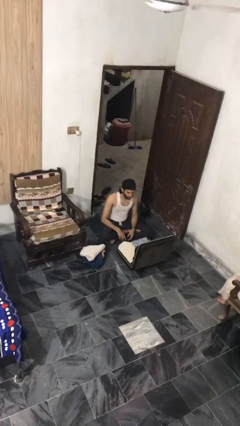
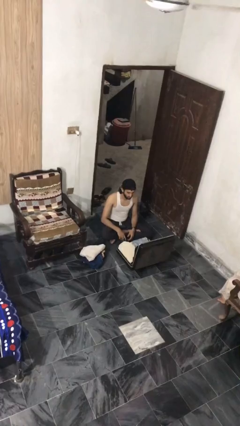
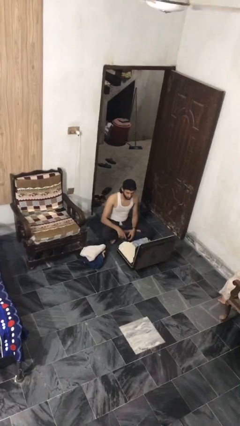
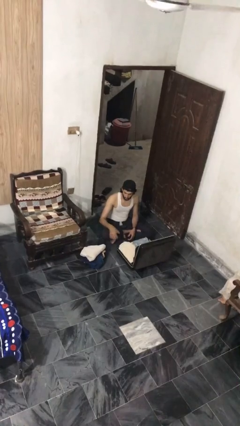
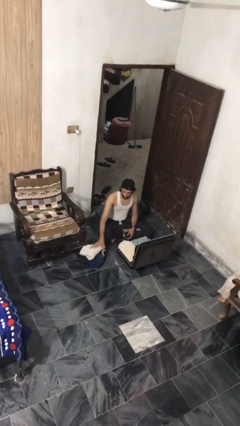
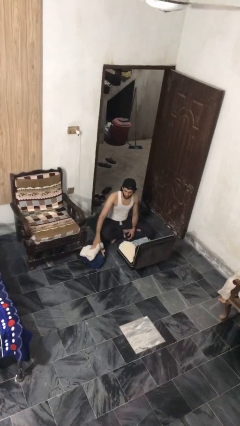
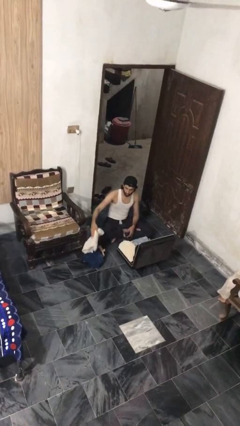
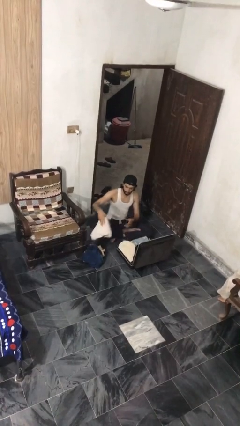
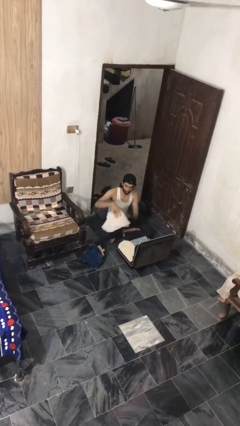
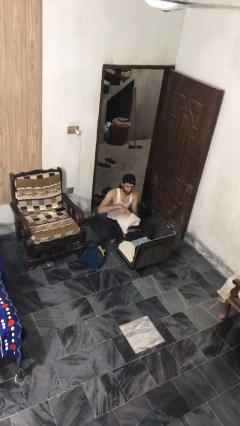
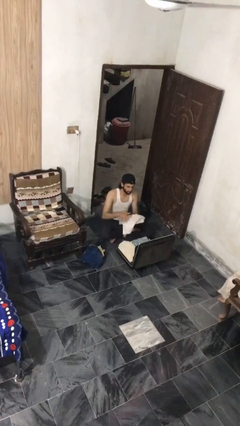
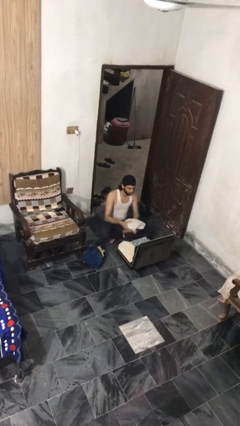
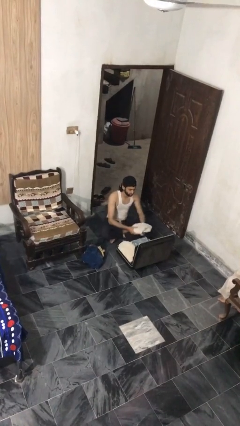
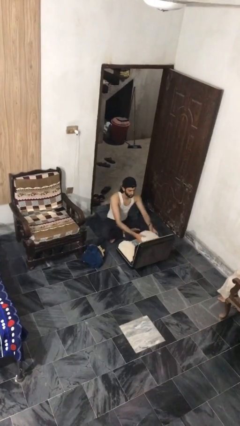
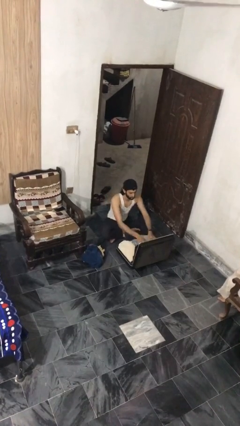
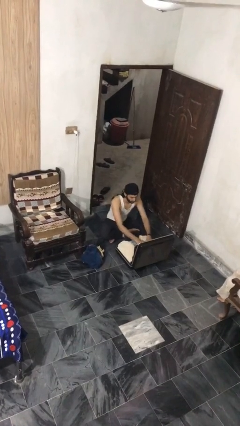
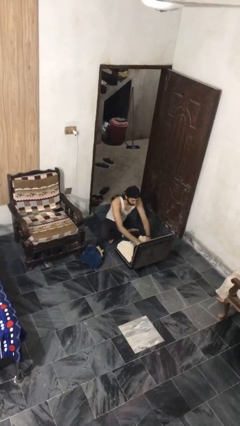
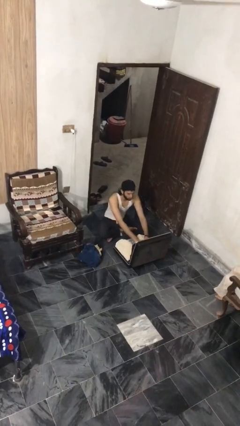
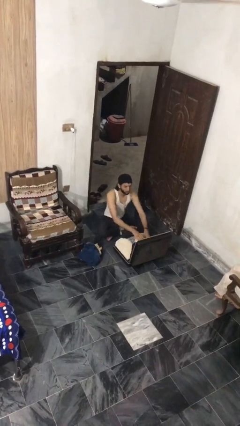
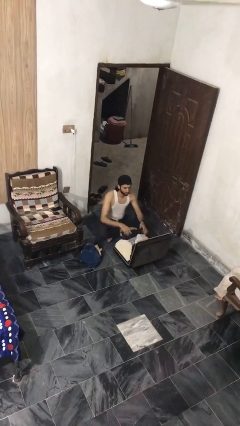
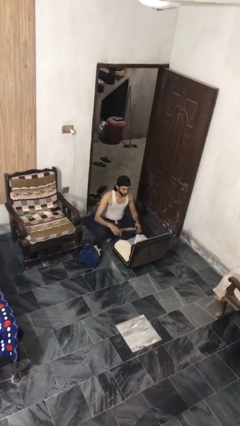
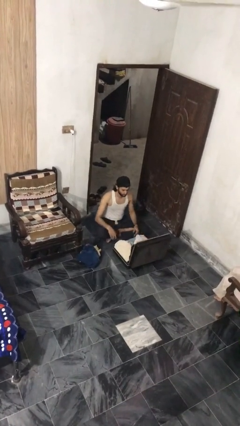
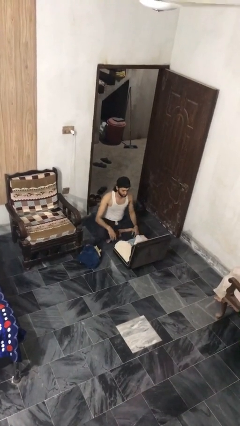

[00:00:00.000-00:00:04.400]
person loads clothes into suitcase

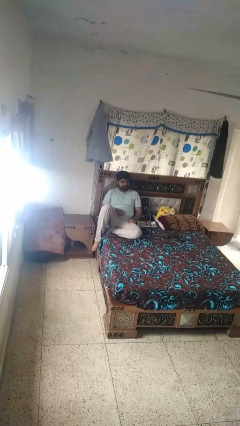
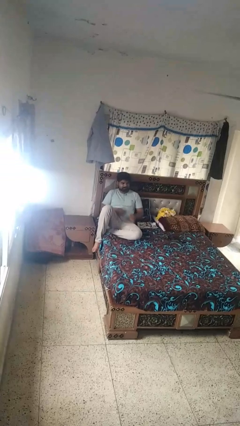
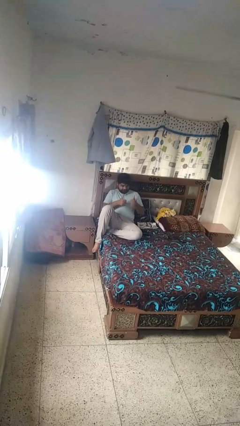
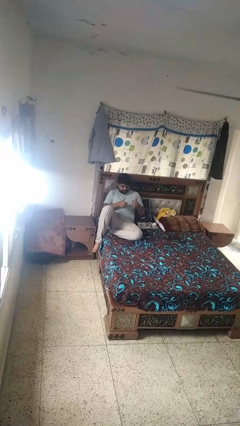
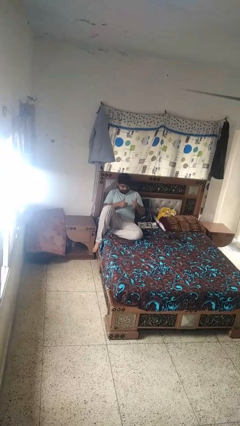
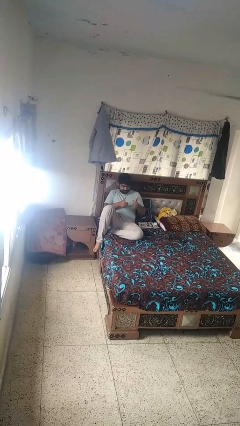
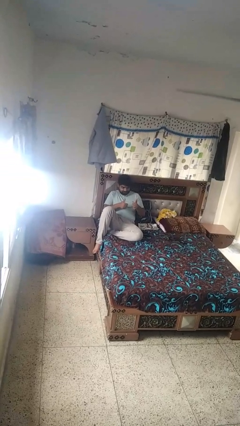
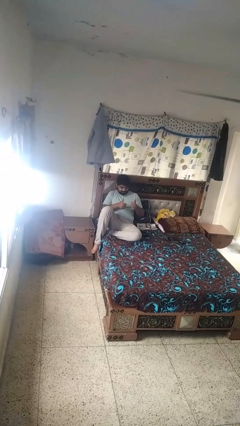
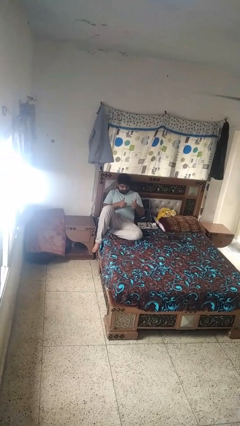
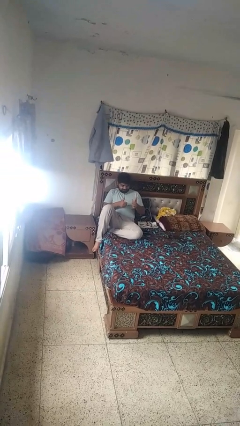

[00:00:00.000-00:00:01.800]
person gestures thumbs up

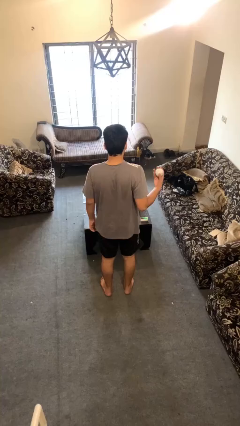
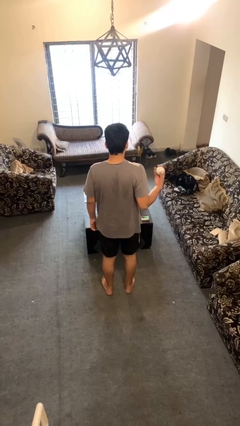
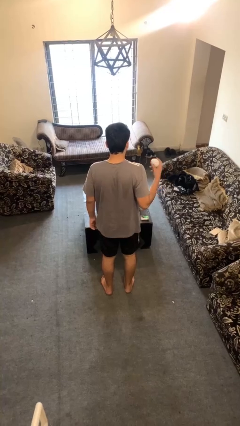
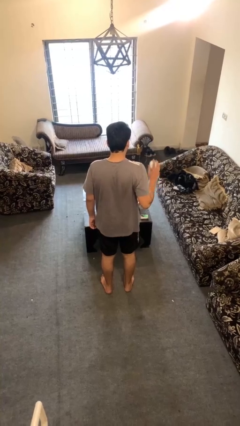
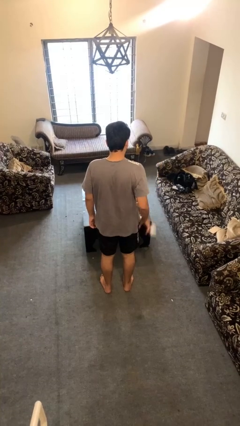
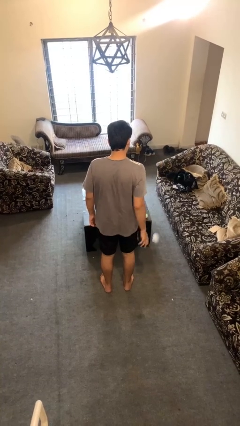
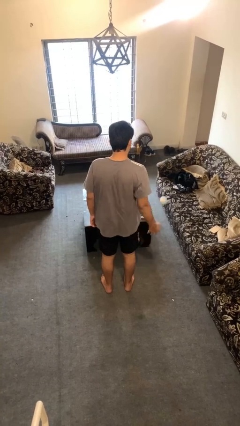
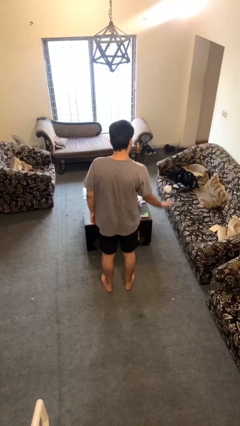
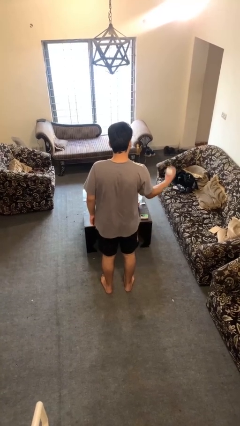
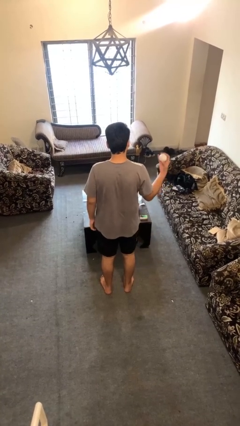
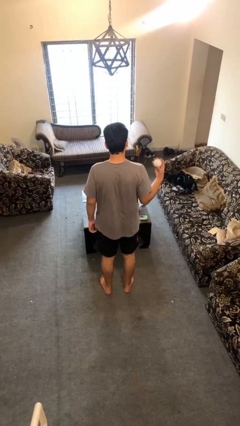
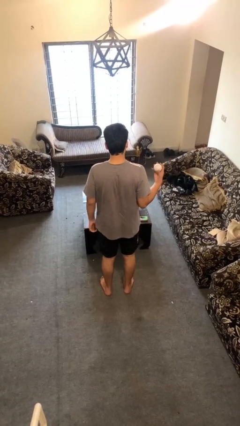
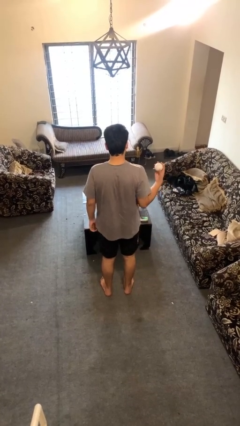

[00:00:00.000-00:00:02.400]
person bounces ball on floor

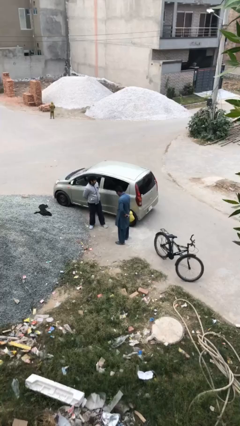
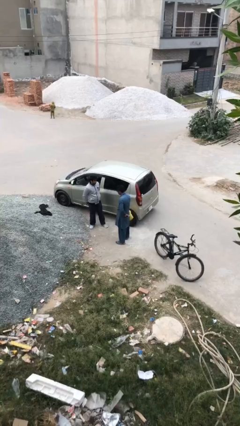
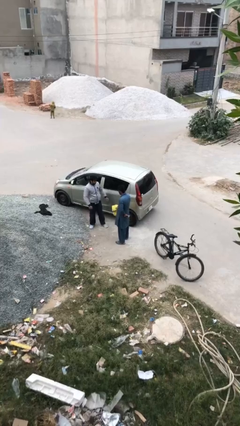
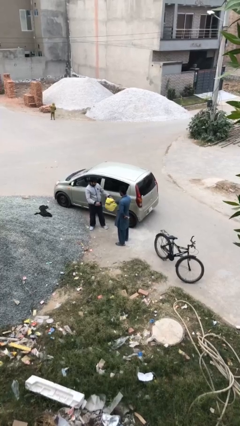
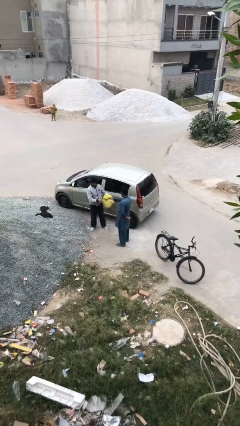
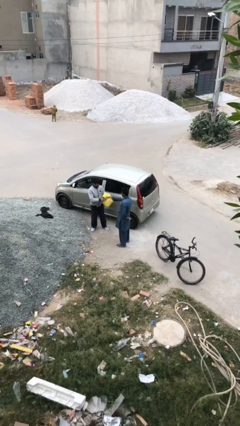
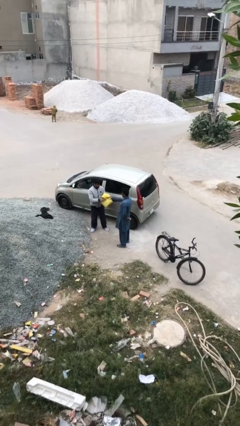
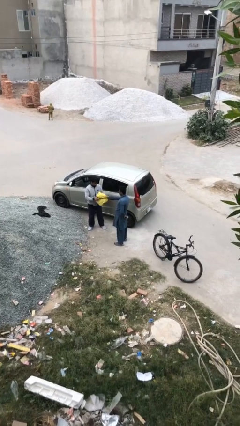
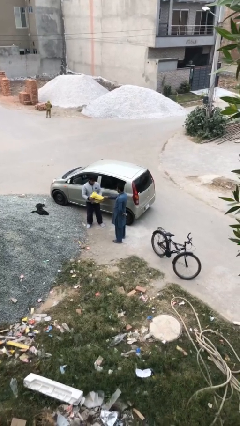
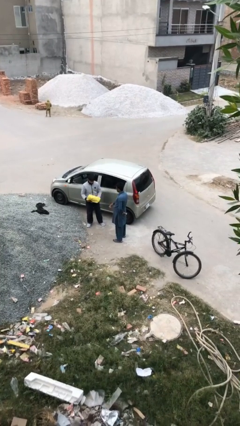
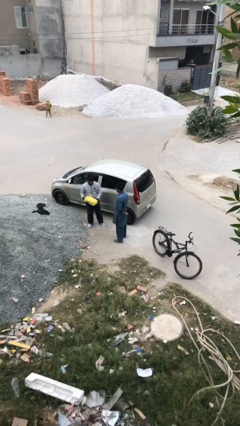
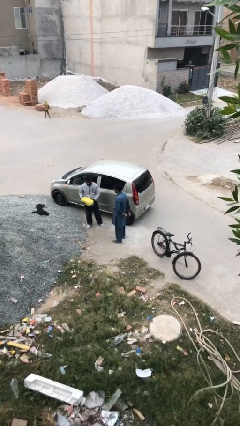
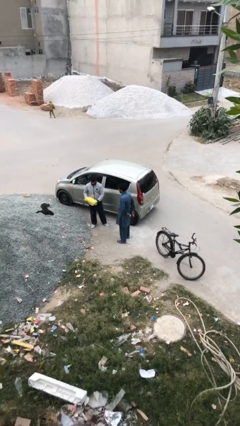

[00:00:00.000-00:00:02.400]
person transfers object to person

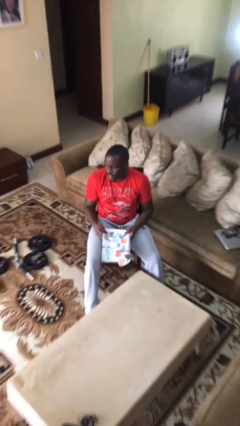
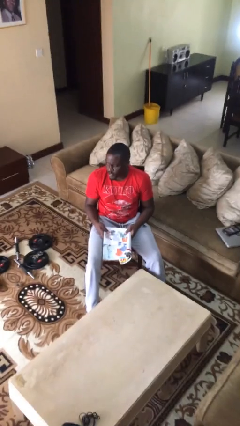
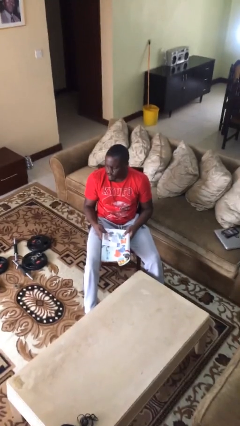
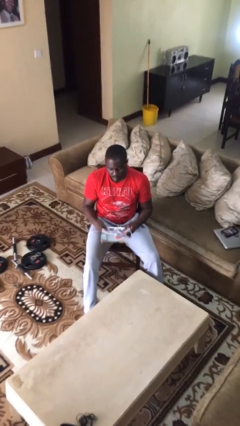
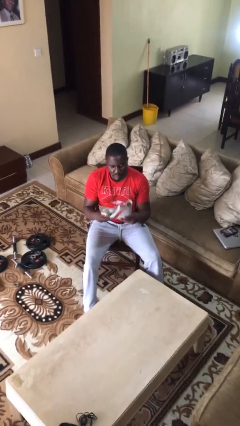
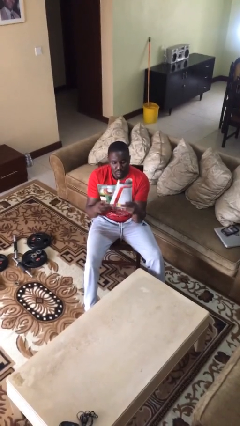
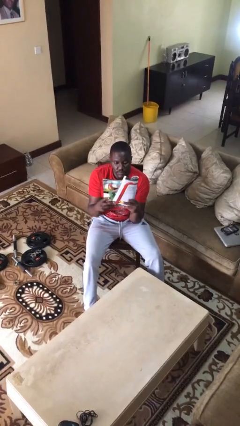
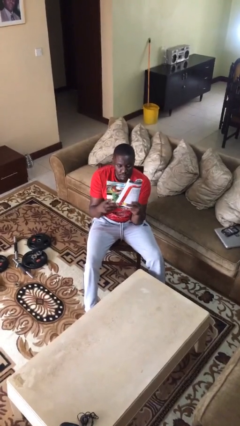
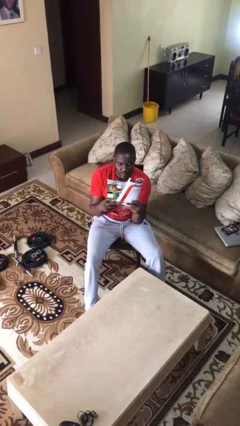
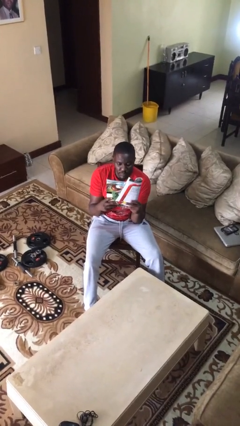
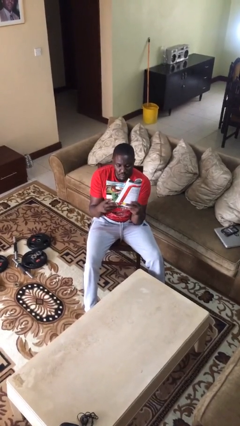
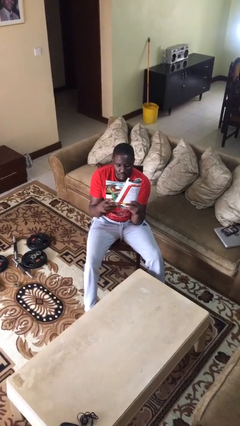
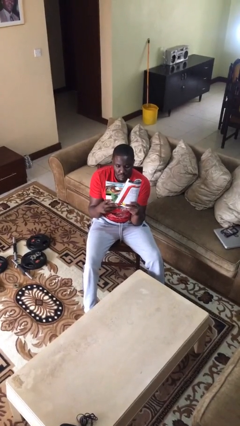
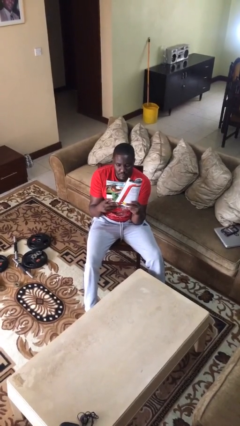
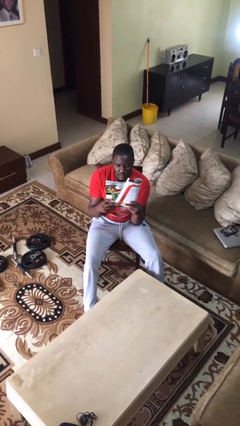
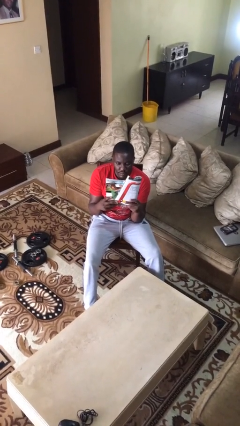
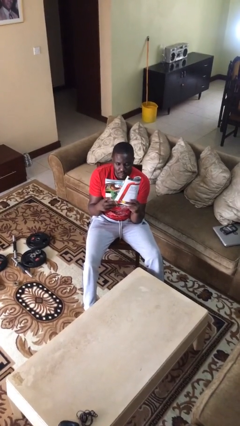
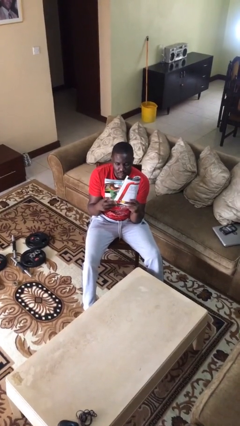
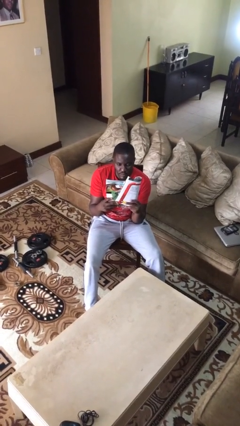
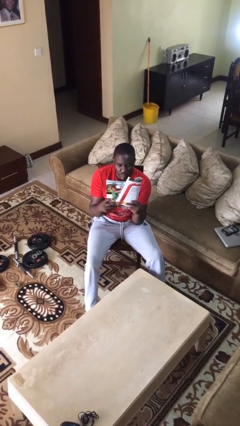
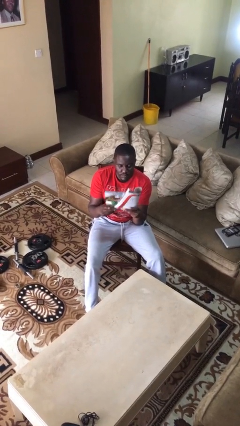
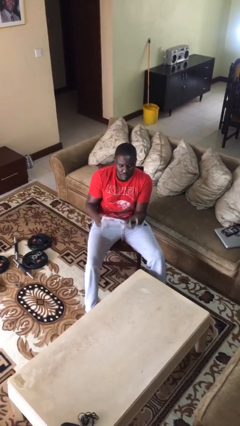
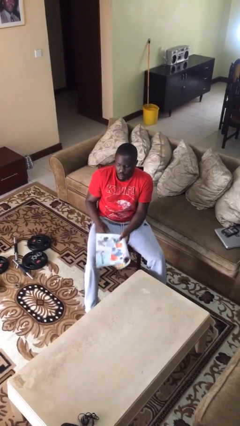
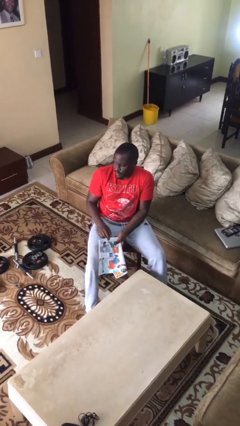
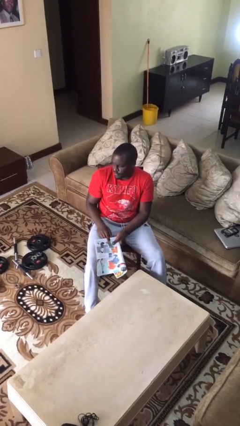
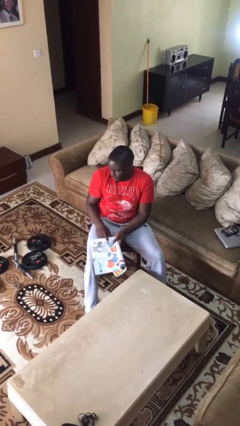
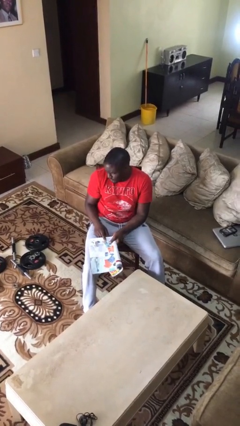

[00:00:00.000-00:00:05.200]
person reads document

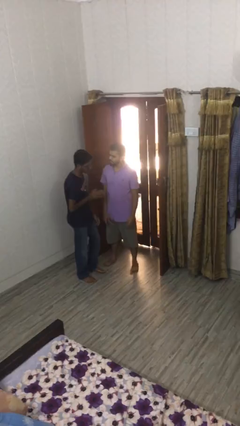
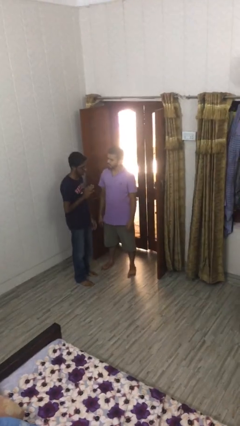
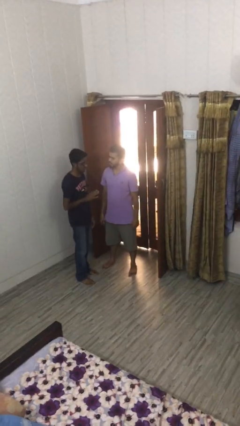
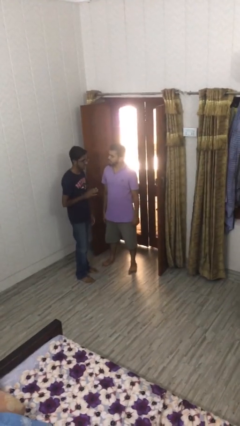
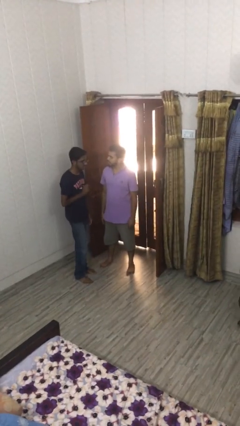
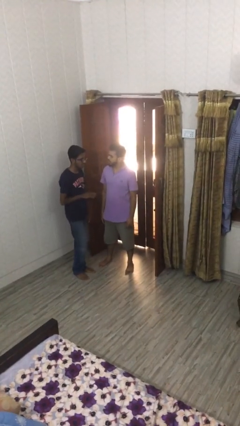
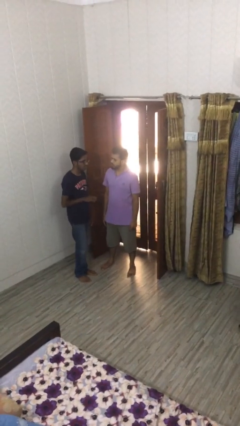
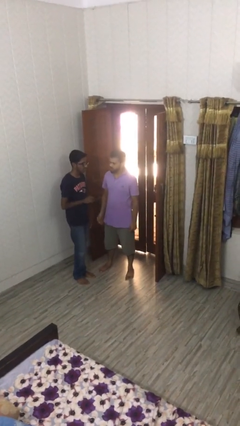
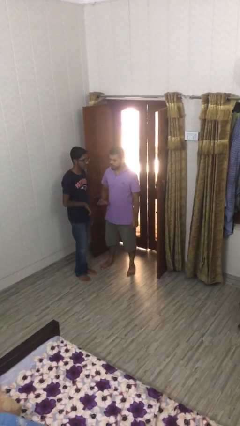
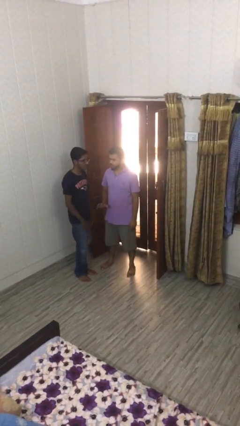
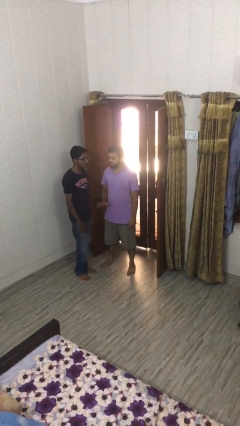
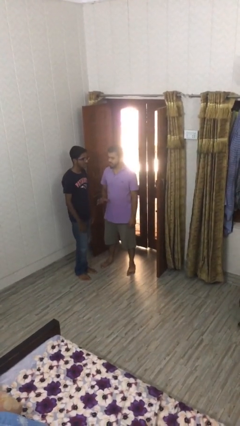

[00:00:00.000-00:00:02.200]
person talks to person
